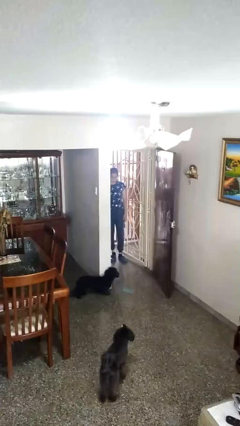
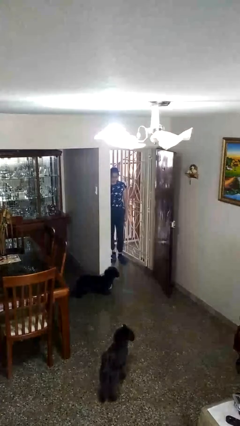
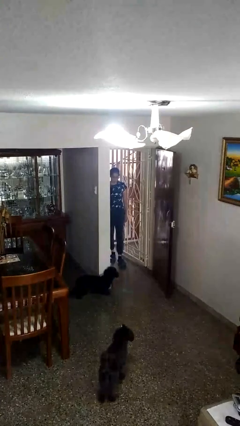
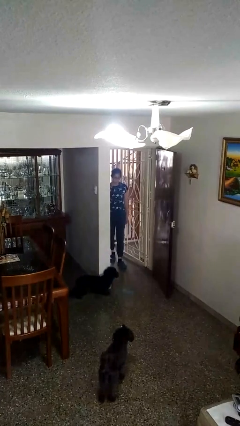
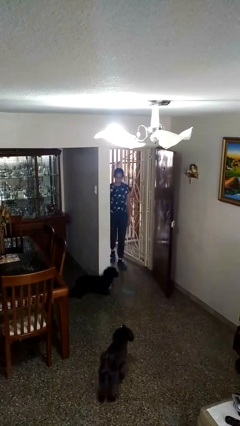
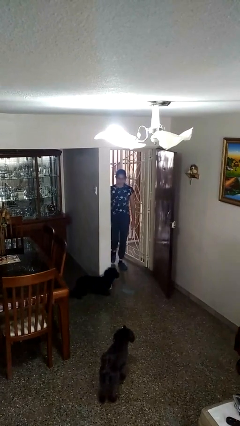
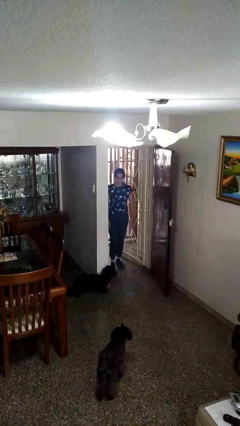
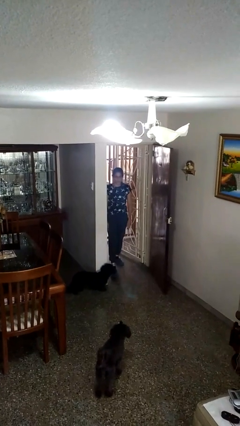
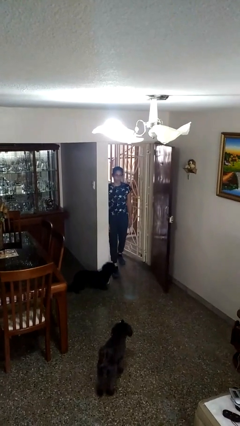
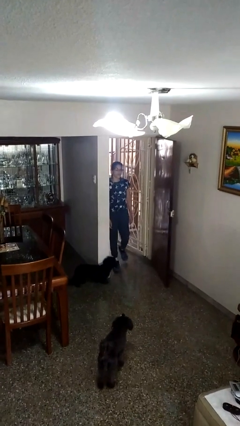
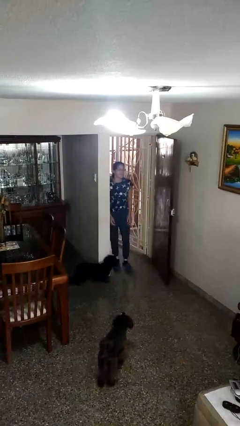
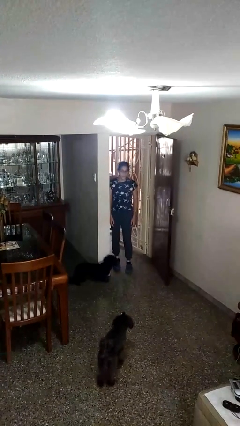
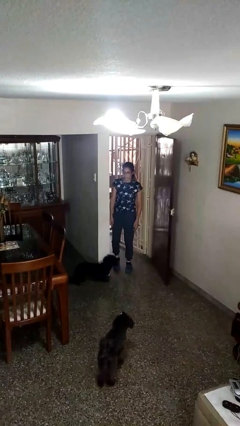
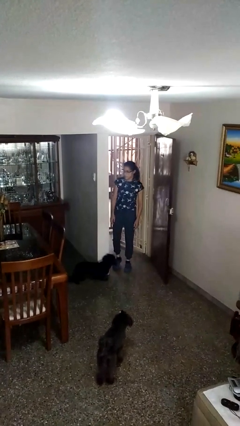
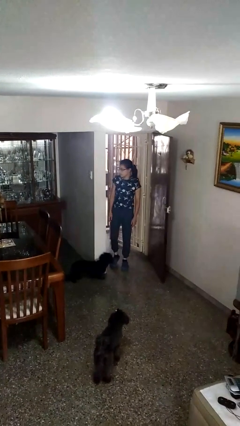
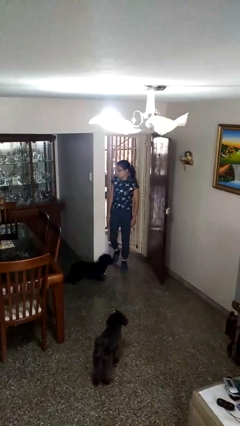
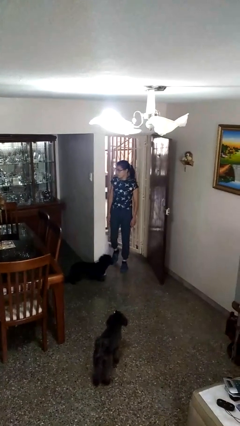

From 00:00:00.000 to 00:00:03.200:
person bumps into wall

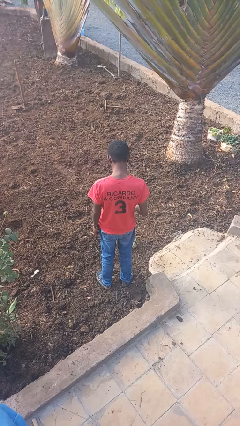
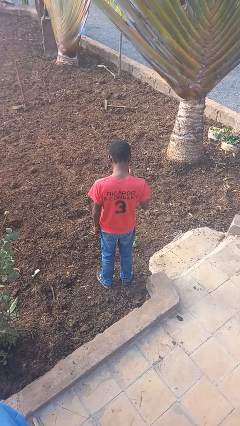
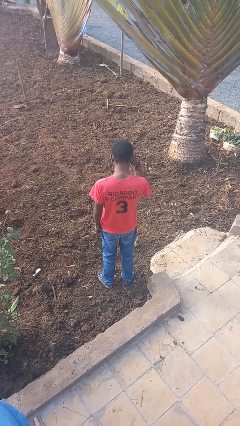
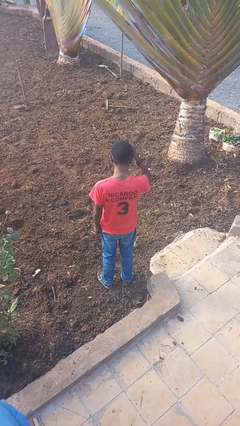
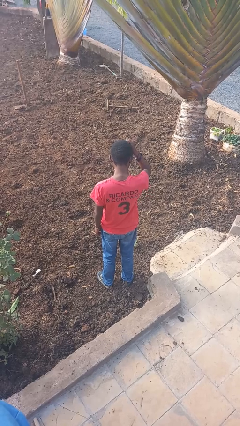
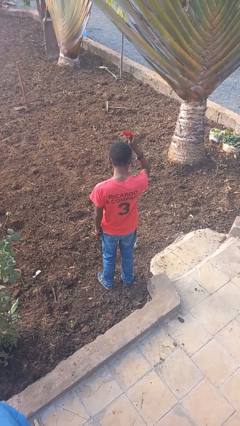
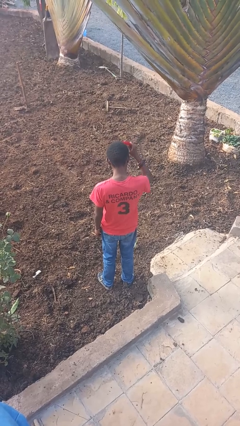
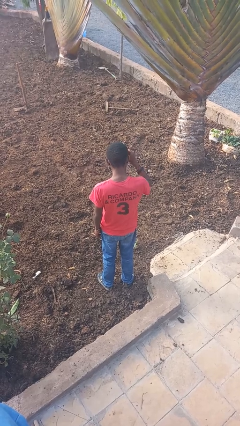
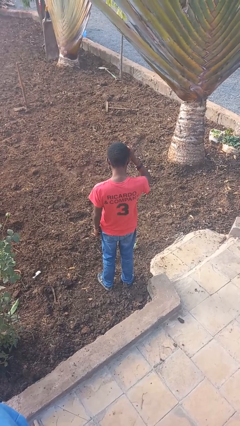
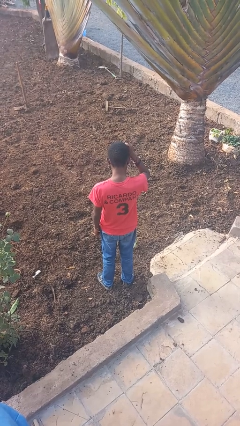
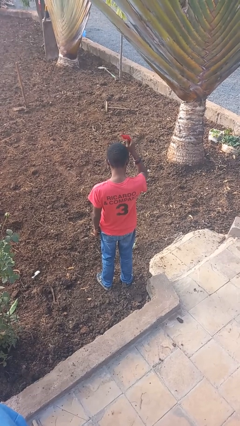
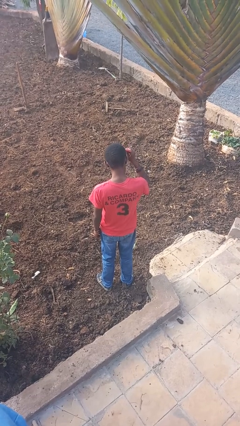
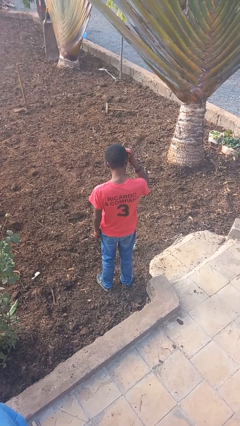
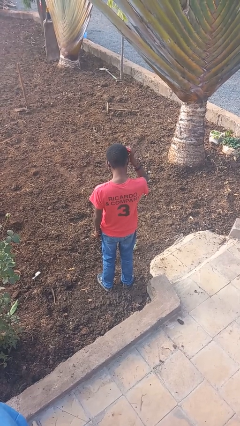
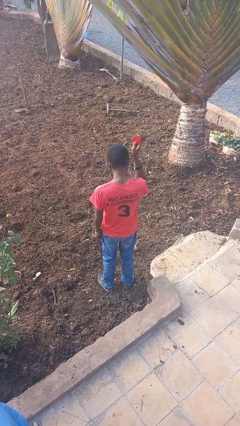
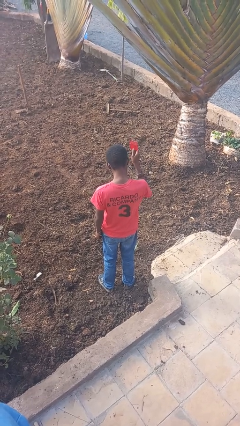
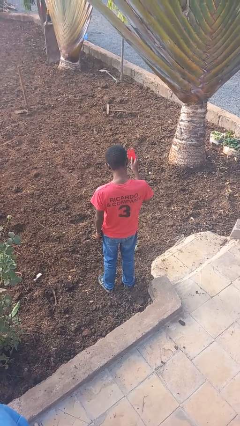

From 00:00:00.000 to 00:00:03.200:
person brushes hair

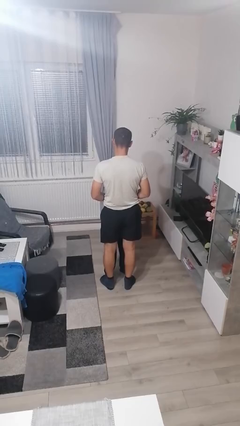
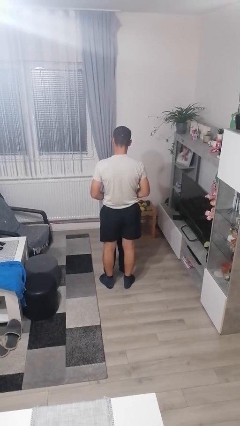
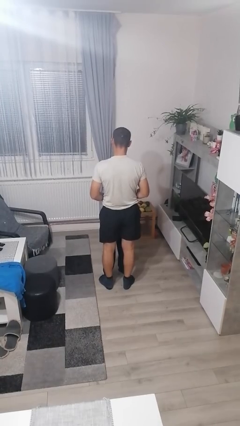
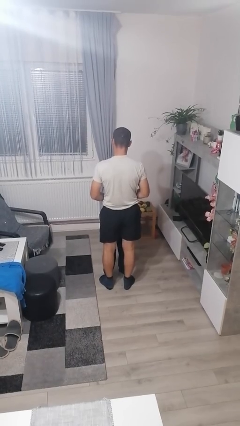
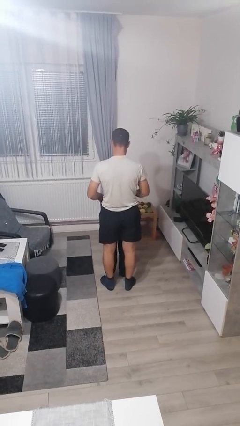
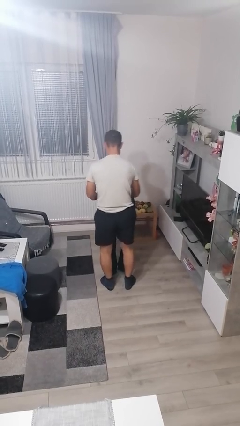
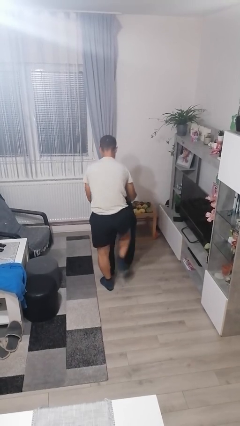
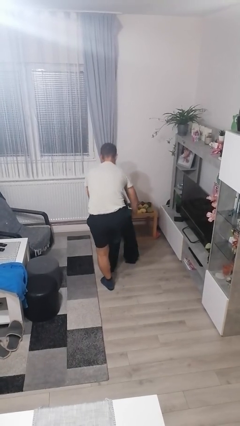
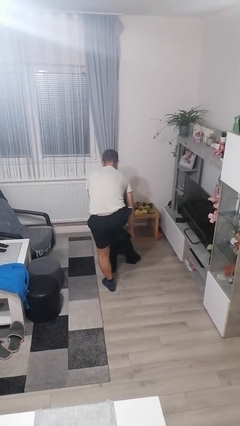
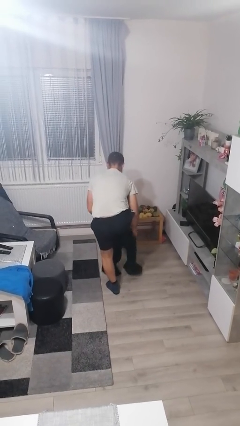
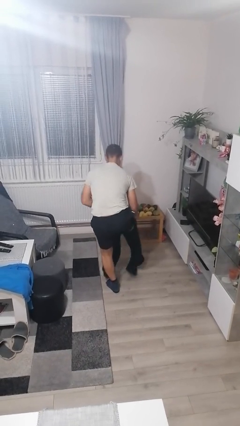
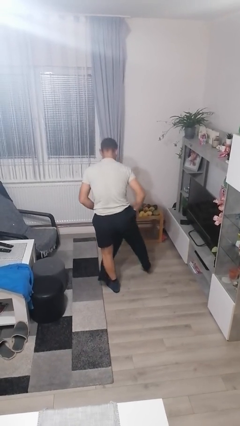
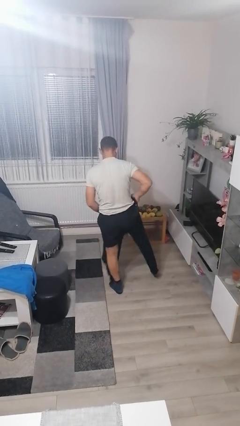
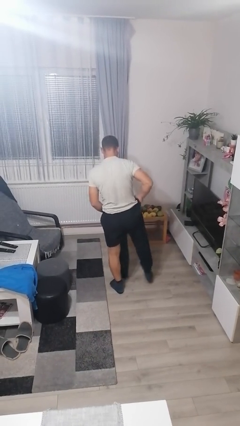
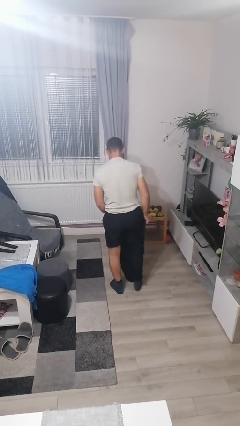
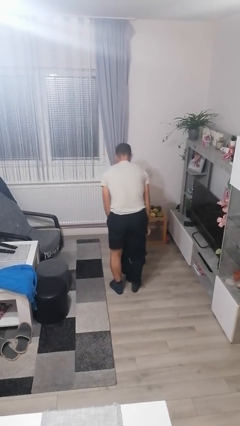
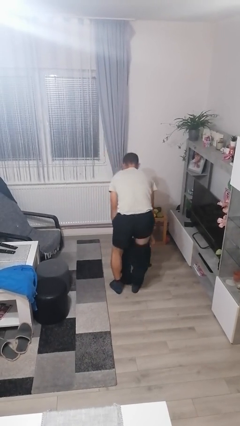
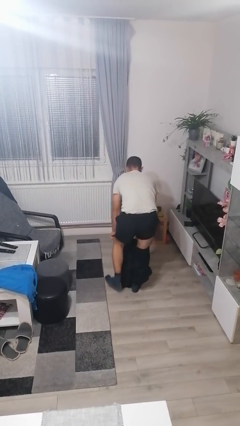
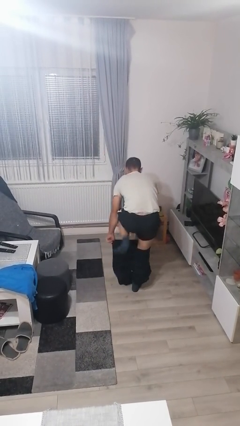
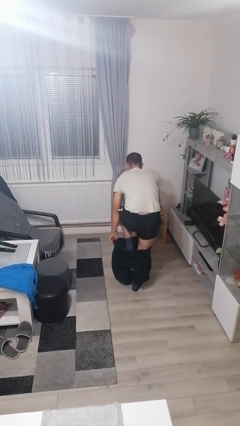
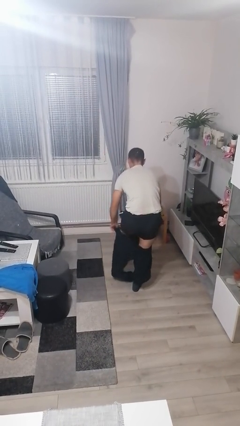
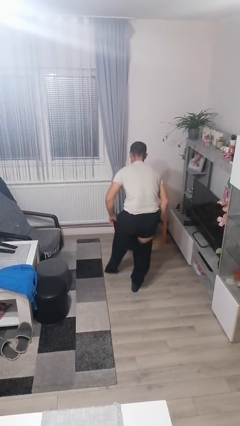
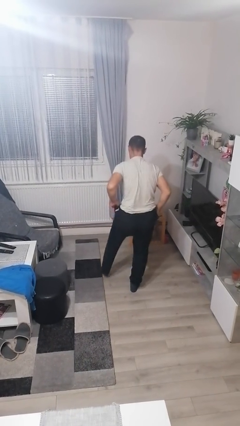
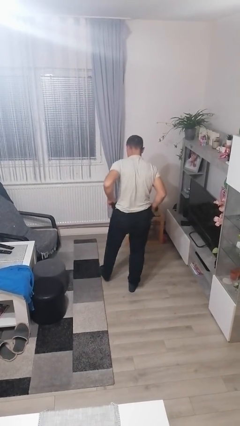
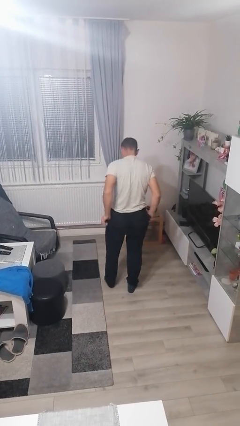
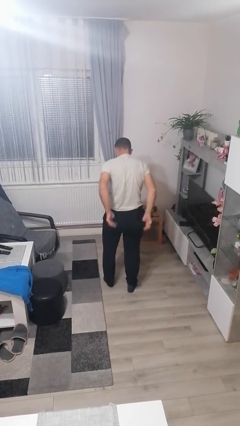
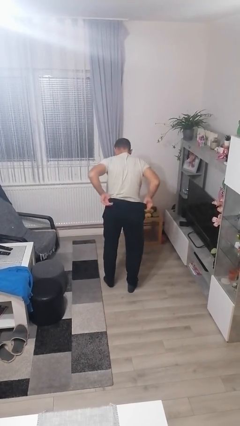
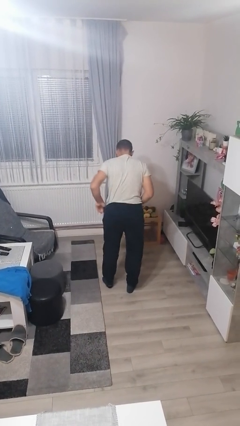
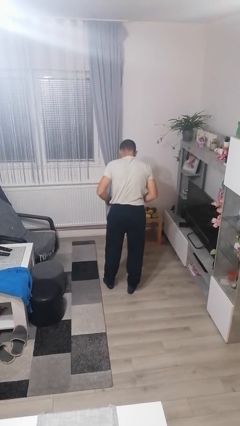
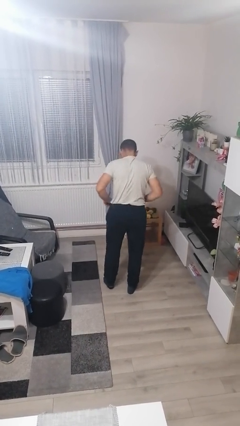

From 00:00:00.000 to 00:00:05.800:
person puts on pants

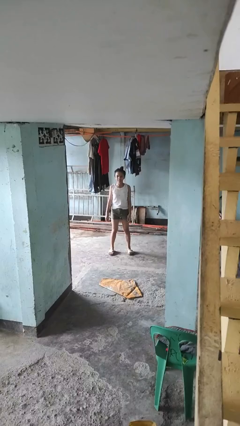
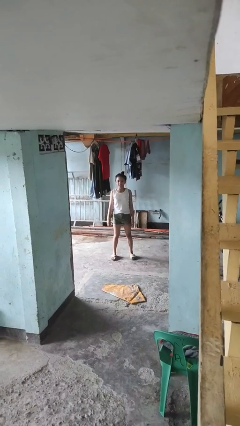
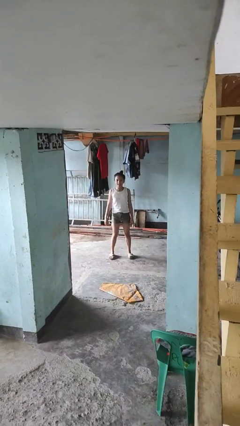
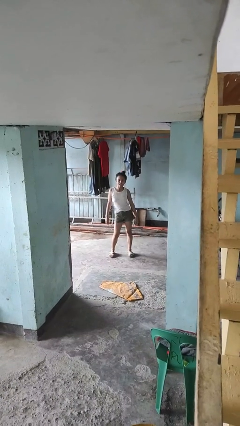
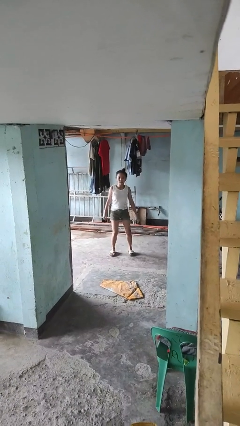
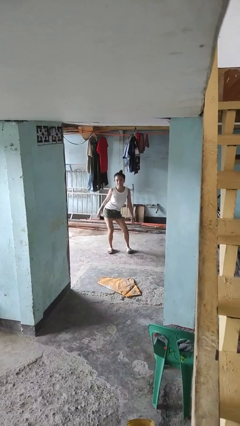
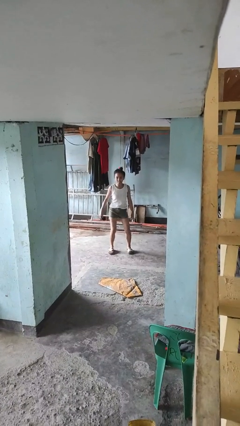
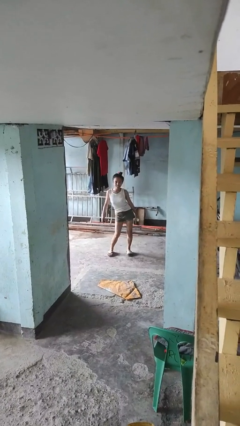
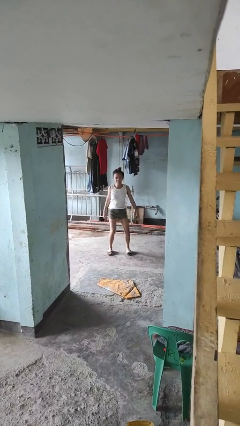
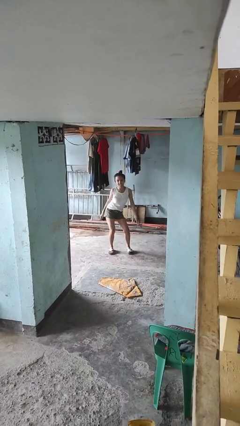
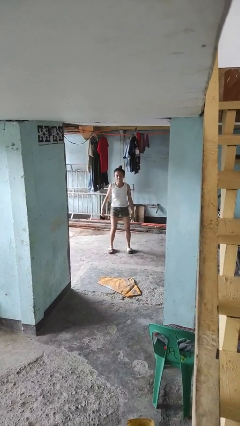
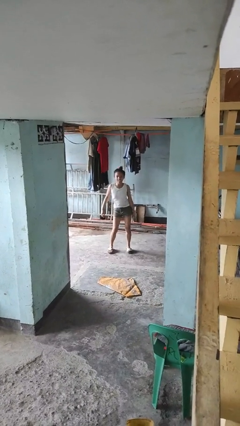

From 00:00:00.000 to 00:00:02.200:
person wiggles hips

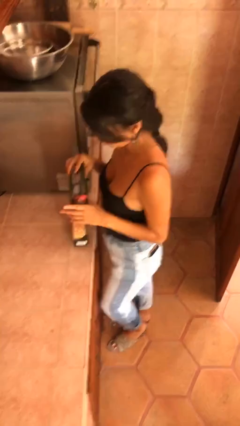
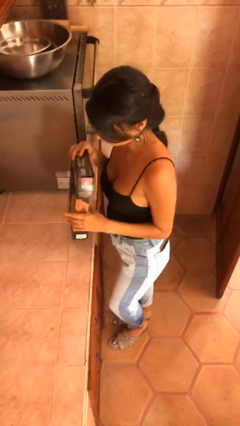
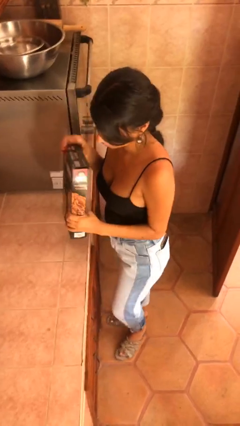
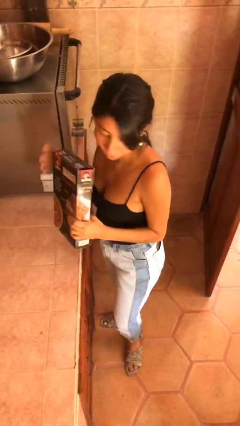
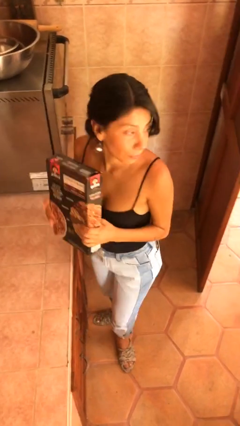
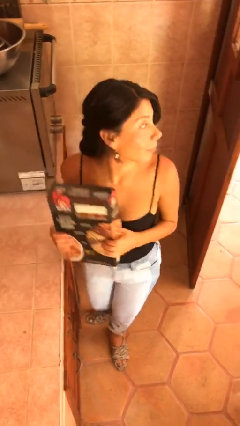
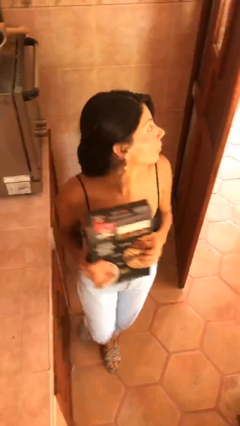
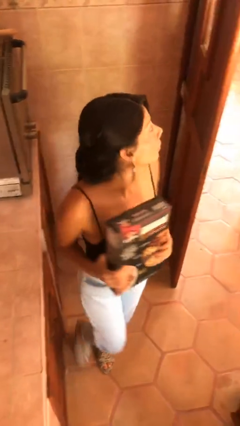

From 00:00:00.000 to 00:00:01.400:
person picks up object from table

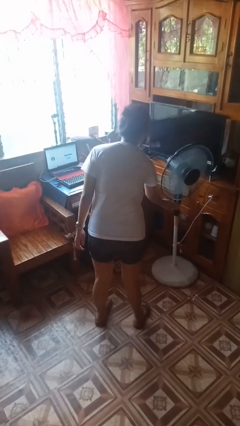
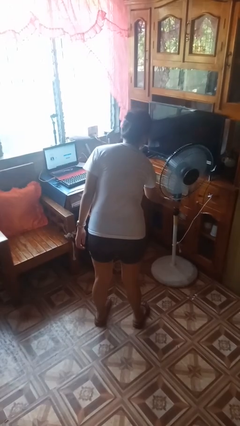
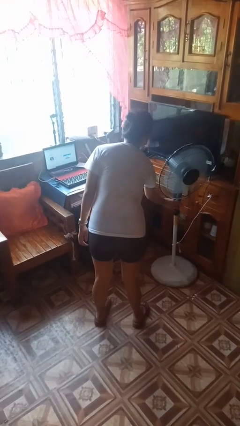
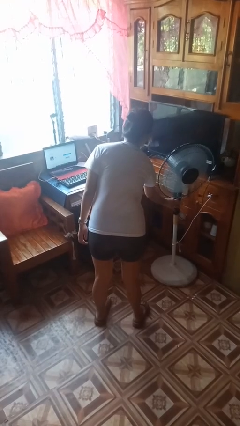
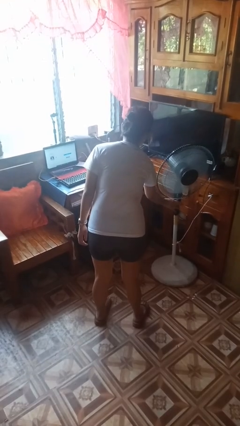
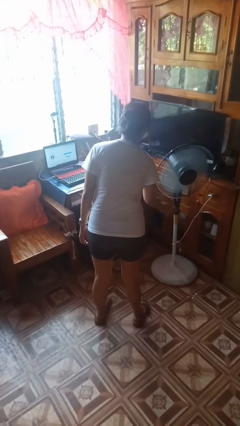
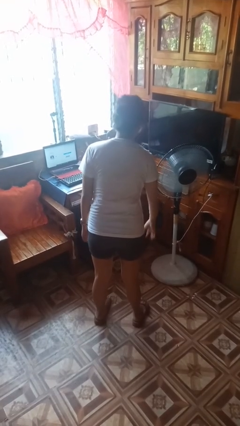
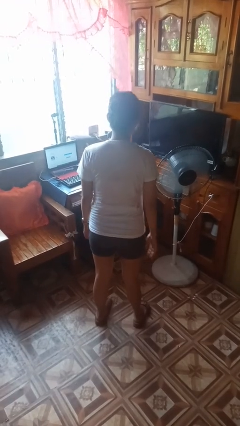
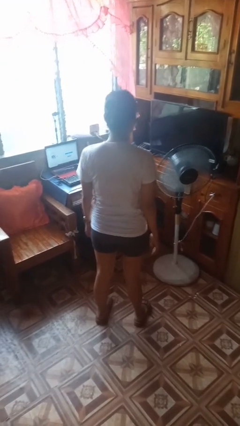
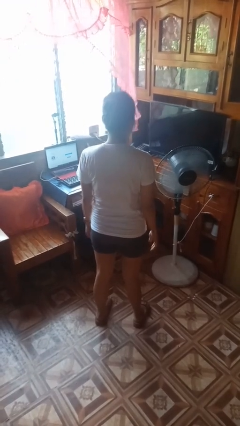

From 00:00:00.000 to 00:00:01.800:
person turns off fan
